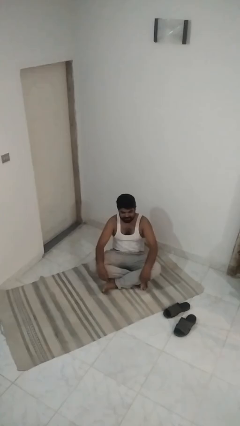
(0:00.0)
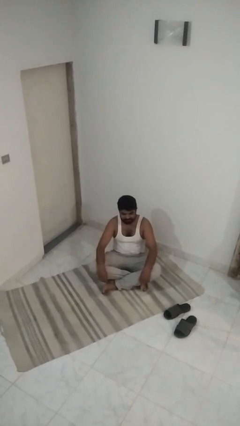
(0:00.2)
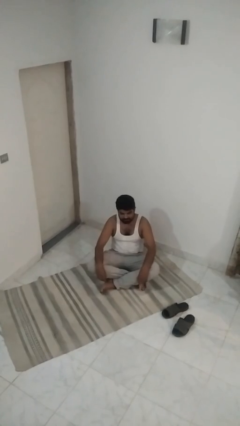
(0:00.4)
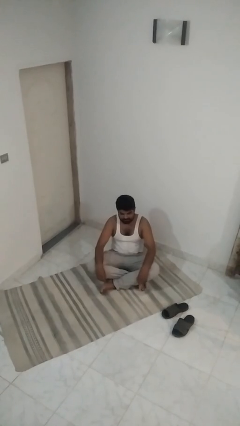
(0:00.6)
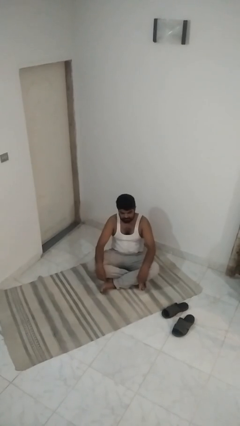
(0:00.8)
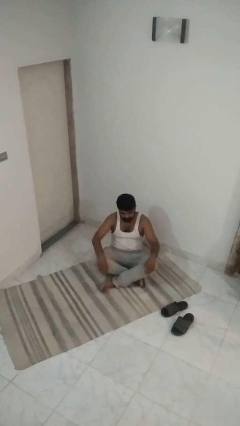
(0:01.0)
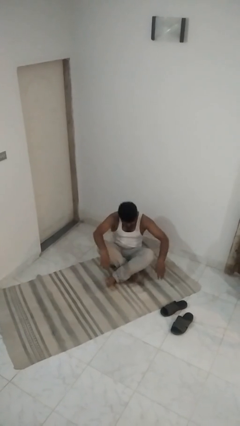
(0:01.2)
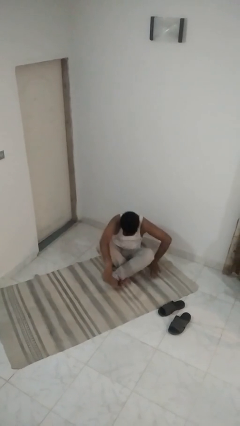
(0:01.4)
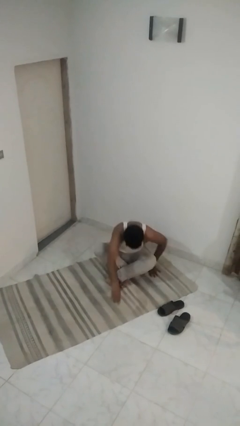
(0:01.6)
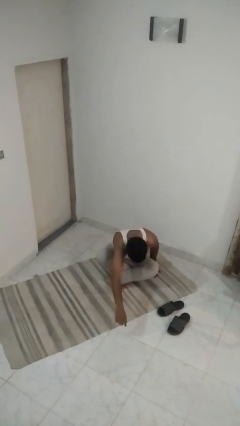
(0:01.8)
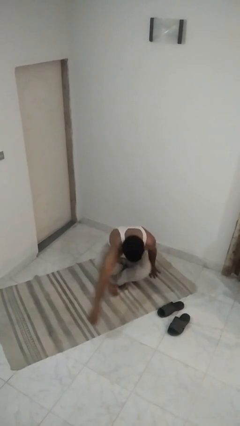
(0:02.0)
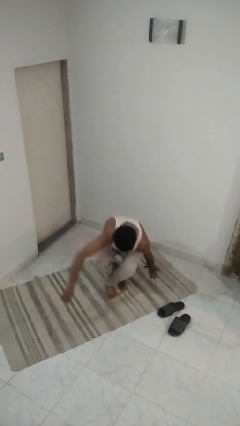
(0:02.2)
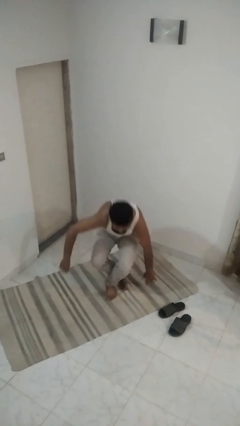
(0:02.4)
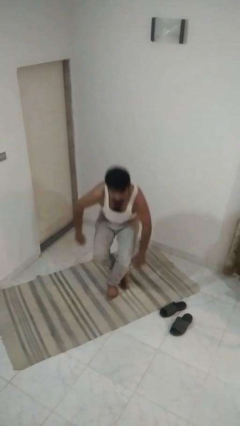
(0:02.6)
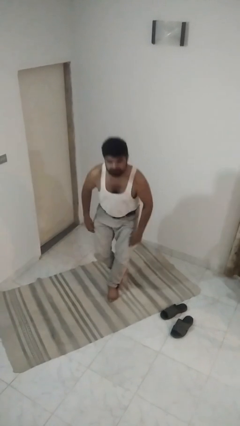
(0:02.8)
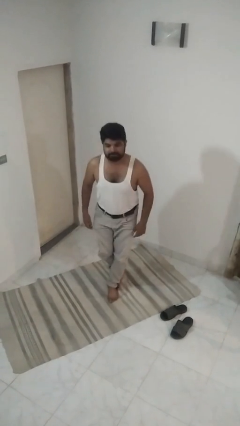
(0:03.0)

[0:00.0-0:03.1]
person stands up from floor

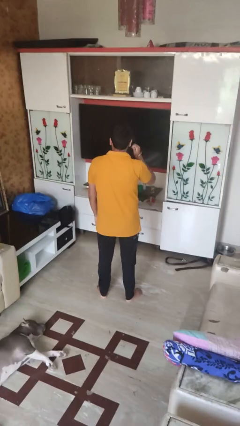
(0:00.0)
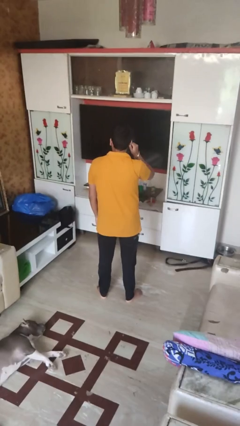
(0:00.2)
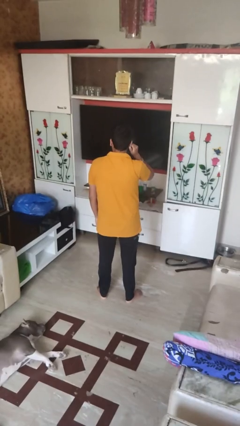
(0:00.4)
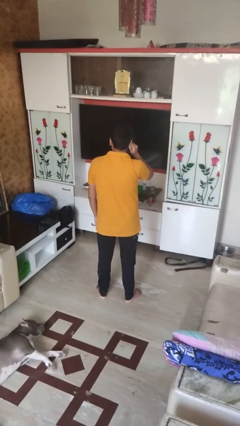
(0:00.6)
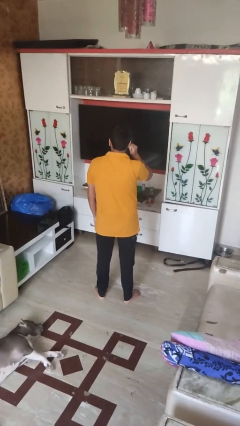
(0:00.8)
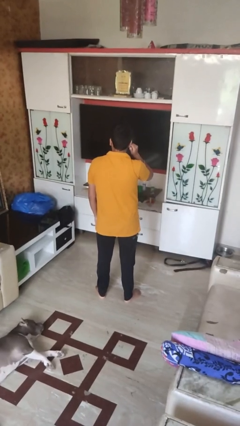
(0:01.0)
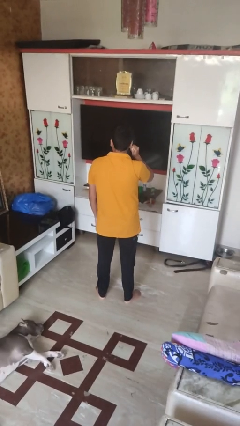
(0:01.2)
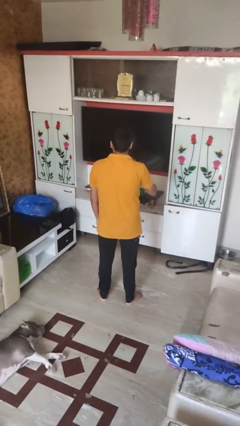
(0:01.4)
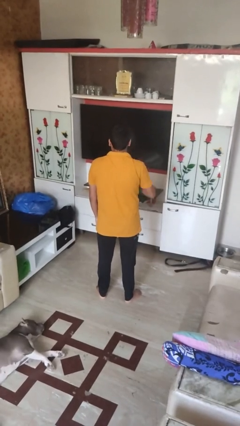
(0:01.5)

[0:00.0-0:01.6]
person touches earlobe

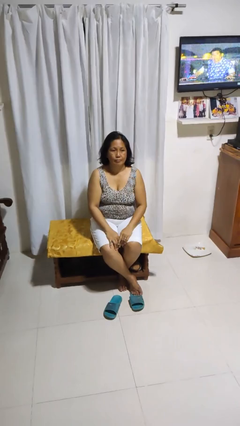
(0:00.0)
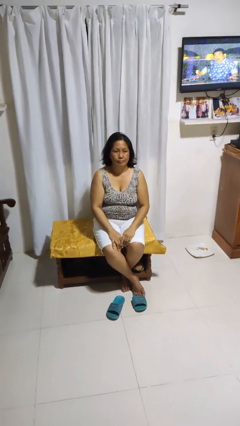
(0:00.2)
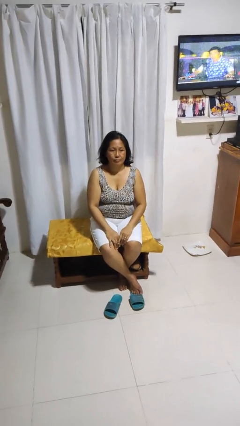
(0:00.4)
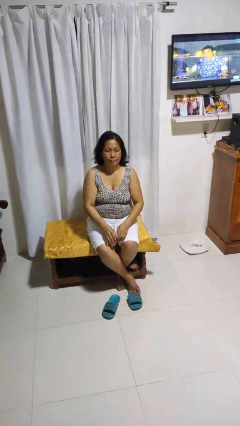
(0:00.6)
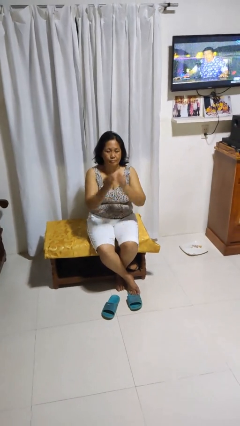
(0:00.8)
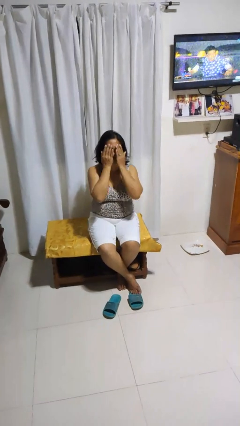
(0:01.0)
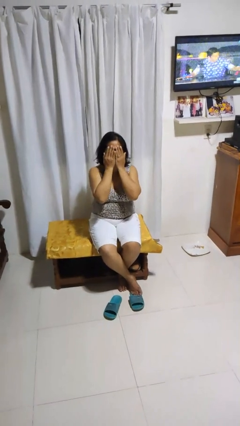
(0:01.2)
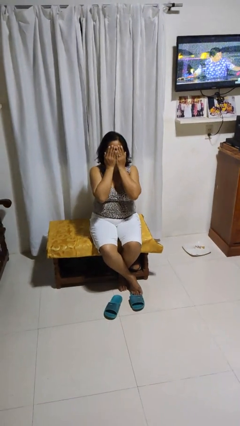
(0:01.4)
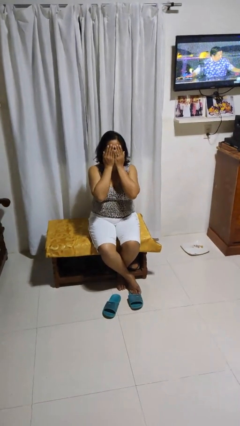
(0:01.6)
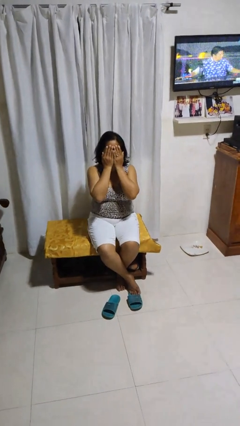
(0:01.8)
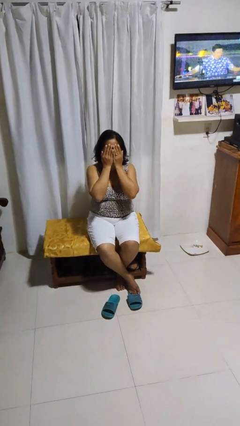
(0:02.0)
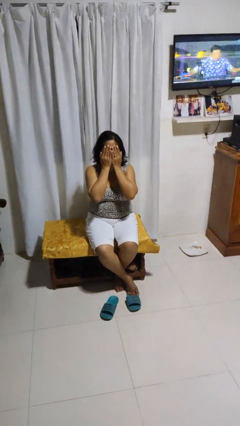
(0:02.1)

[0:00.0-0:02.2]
person covers face with hands

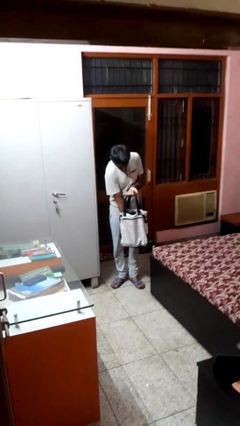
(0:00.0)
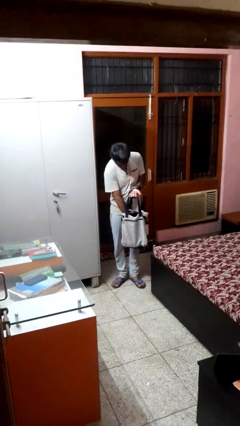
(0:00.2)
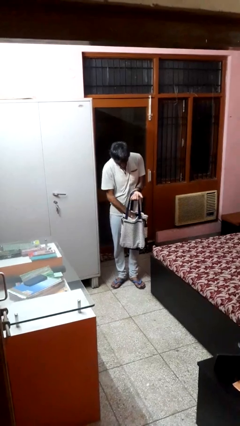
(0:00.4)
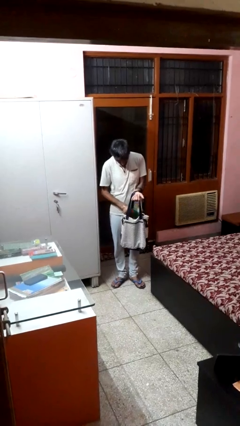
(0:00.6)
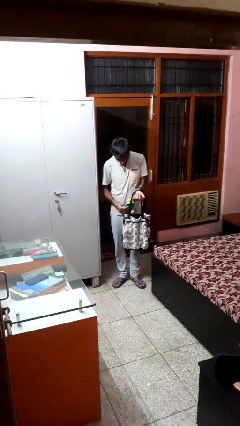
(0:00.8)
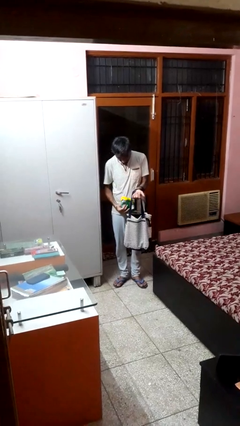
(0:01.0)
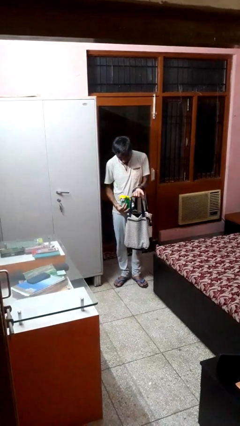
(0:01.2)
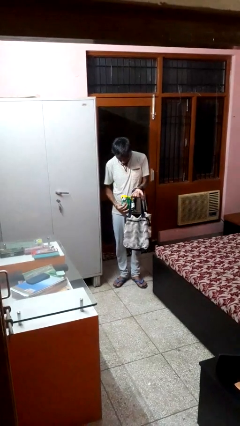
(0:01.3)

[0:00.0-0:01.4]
person takes object from bag

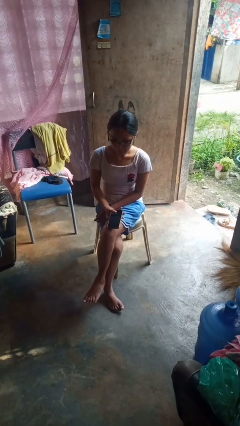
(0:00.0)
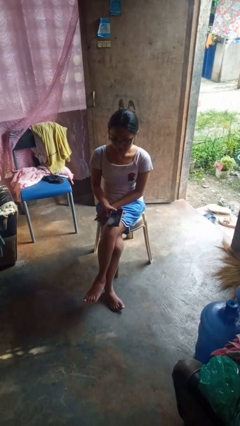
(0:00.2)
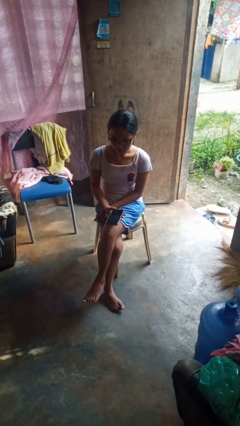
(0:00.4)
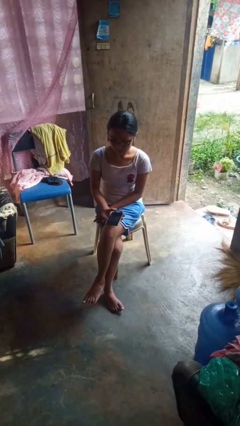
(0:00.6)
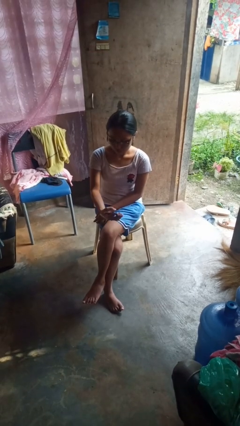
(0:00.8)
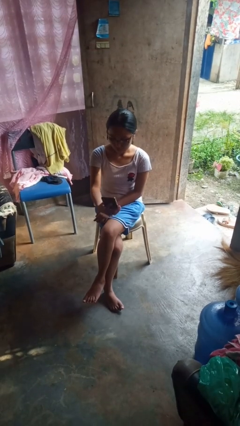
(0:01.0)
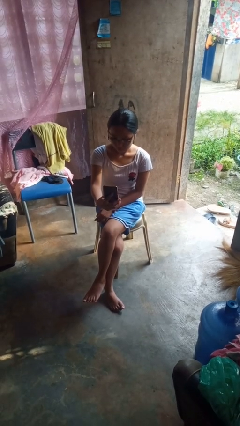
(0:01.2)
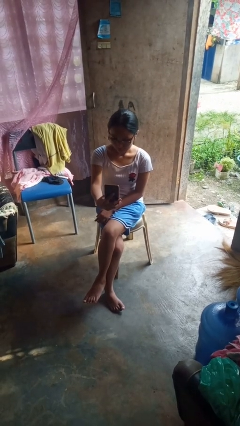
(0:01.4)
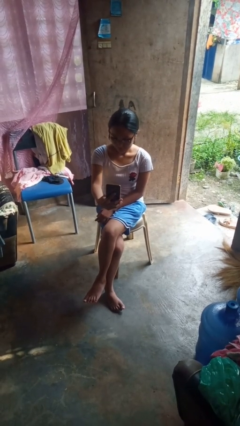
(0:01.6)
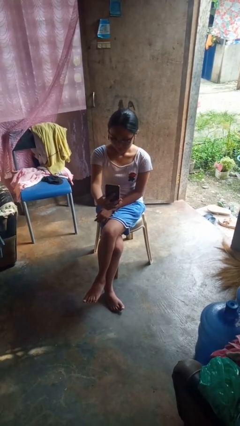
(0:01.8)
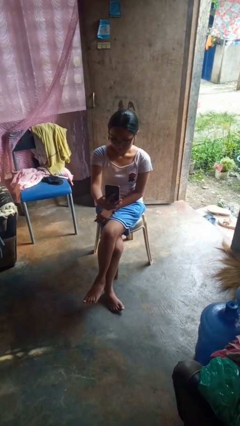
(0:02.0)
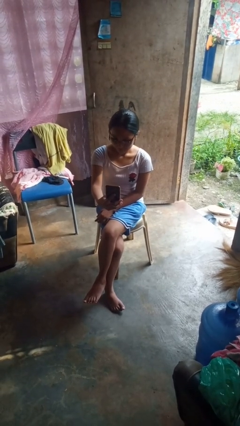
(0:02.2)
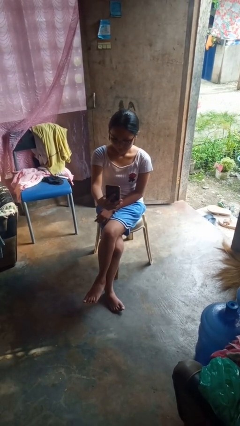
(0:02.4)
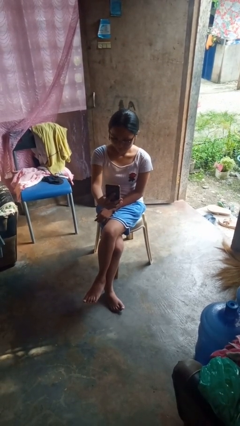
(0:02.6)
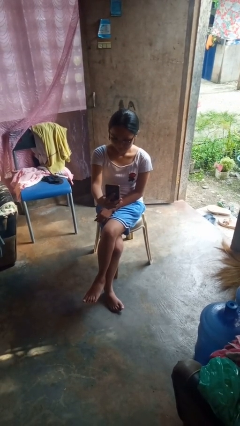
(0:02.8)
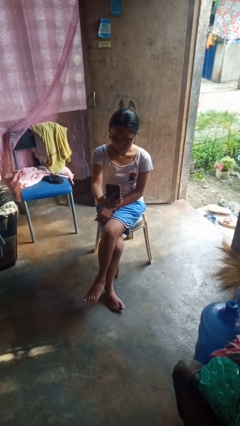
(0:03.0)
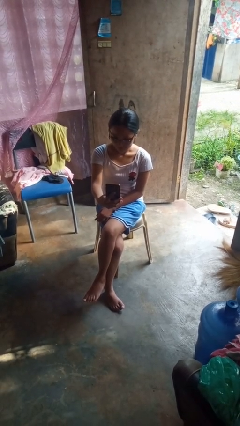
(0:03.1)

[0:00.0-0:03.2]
person takes selfie

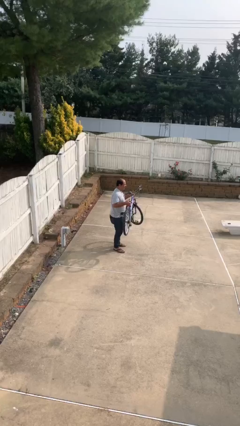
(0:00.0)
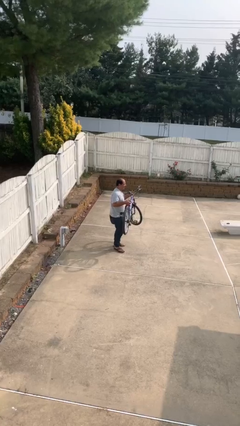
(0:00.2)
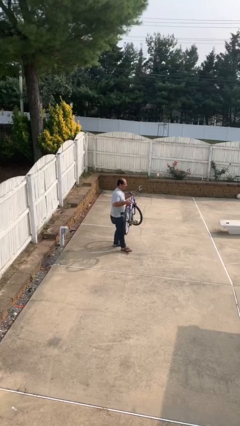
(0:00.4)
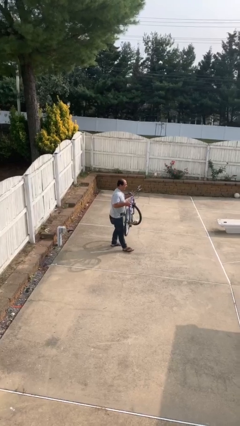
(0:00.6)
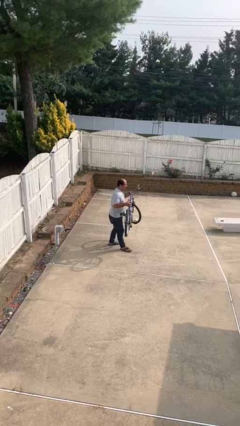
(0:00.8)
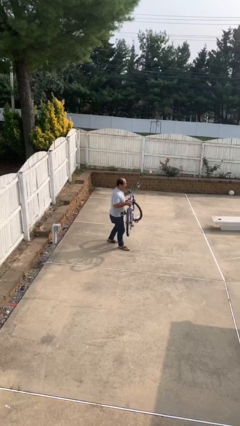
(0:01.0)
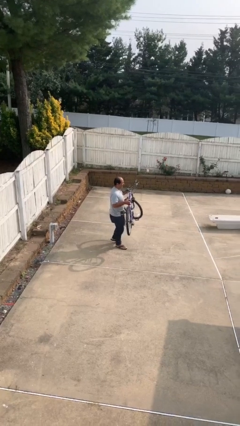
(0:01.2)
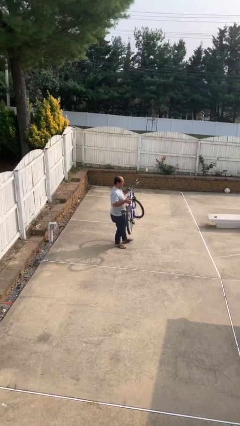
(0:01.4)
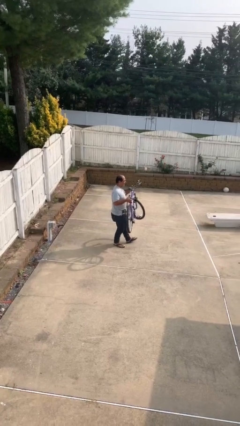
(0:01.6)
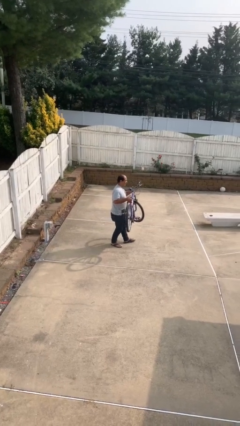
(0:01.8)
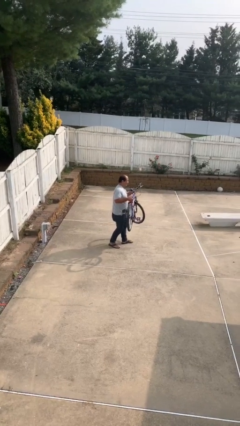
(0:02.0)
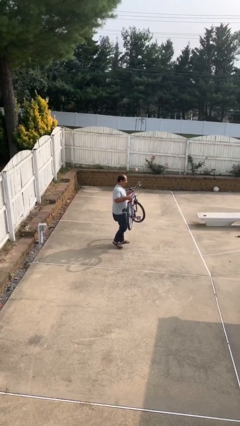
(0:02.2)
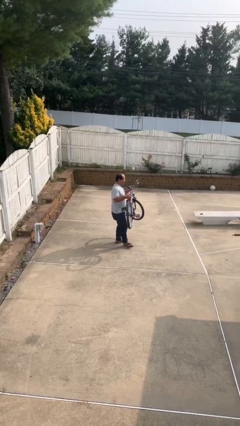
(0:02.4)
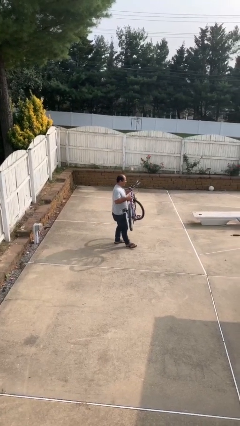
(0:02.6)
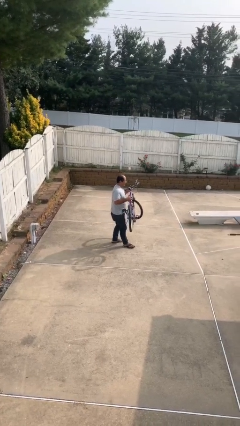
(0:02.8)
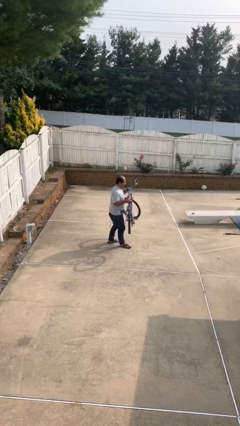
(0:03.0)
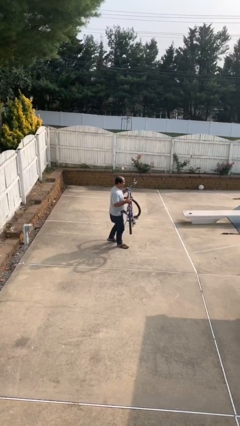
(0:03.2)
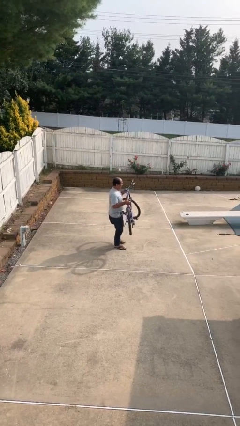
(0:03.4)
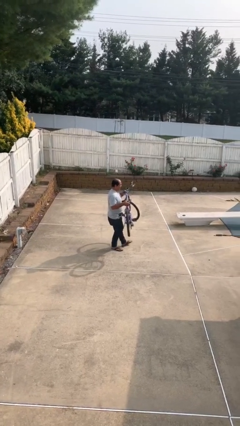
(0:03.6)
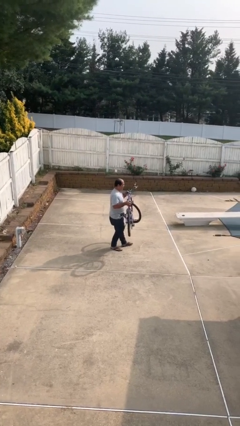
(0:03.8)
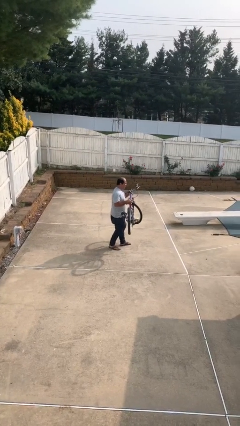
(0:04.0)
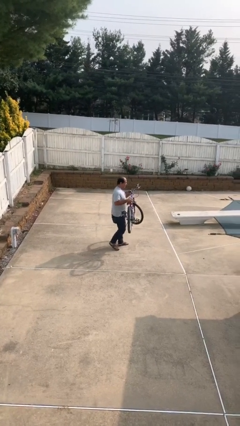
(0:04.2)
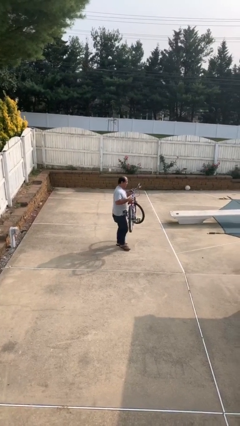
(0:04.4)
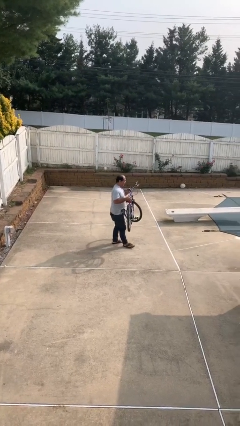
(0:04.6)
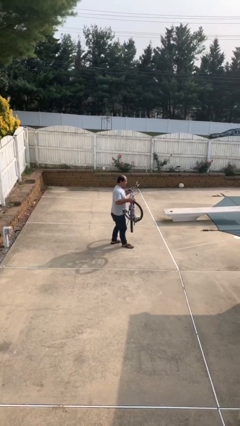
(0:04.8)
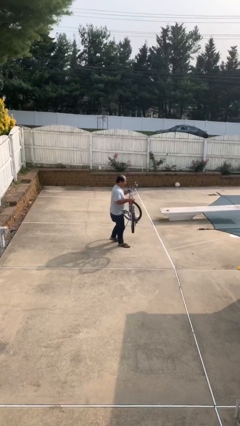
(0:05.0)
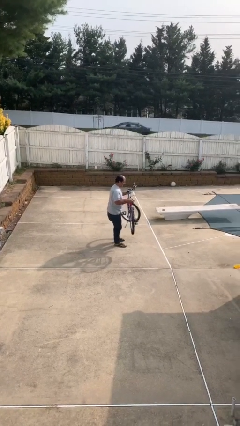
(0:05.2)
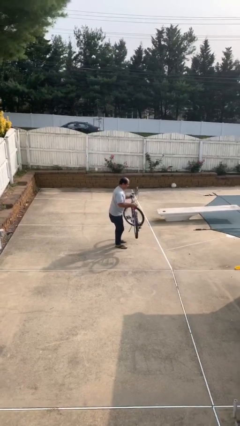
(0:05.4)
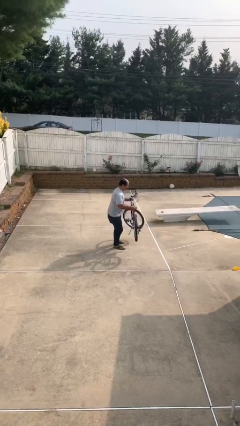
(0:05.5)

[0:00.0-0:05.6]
person carries heavy object

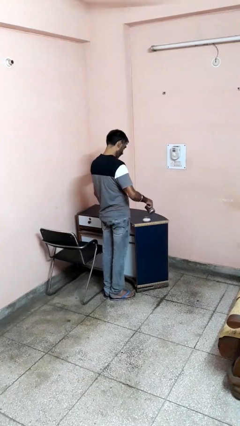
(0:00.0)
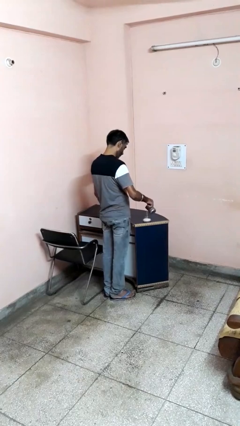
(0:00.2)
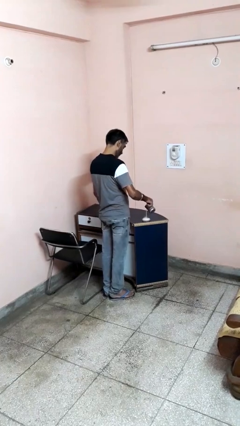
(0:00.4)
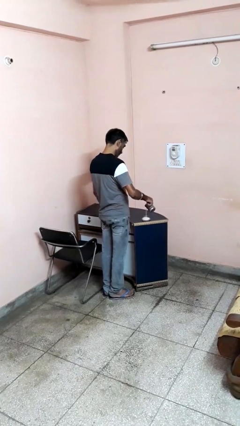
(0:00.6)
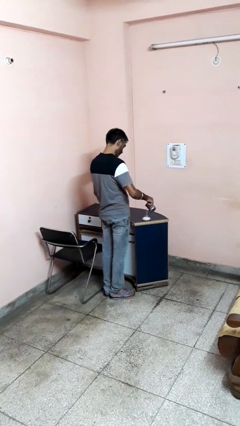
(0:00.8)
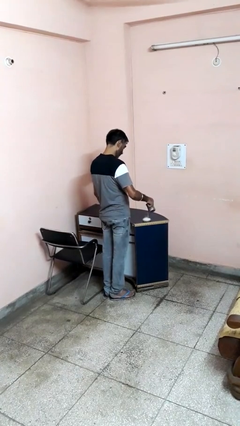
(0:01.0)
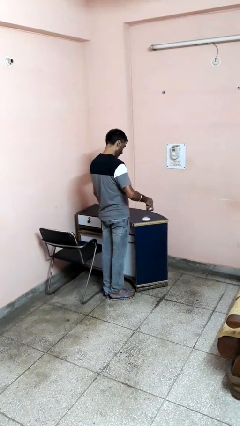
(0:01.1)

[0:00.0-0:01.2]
person pours into bowl
